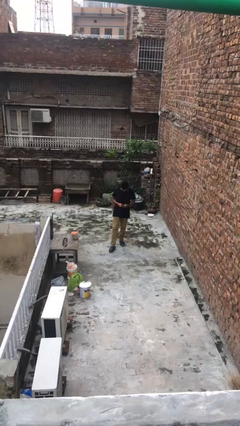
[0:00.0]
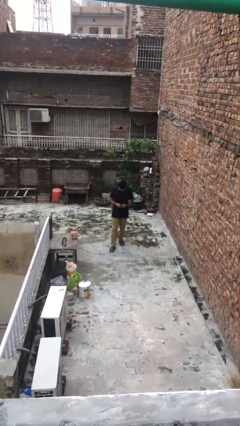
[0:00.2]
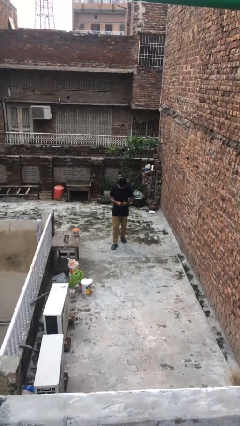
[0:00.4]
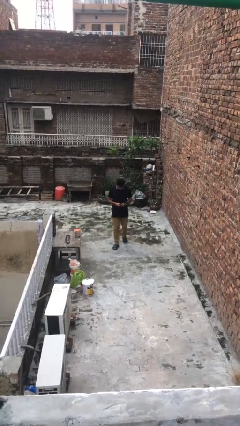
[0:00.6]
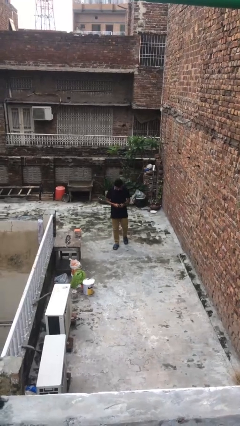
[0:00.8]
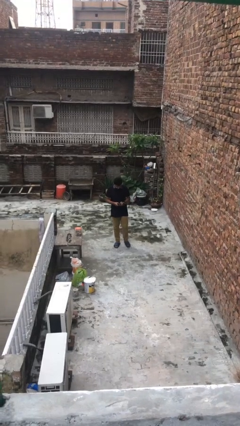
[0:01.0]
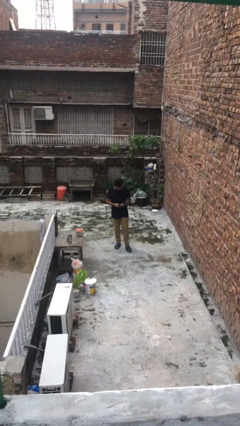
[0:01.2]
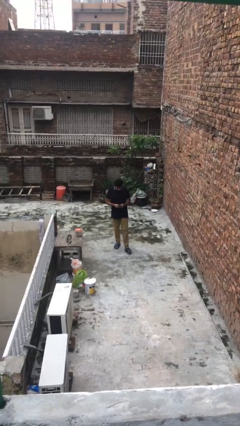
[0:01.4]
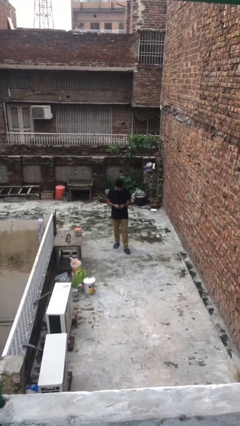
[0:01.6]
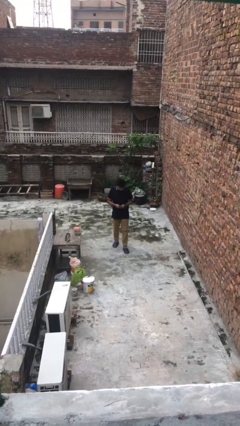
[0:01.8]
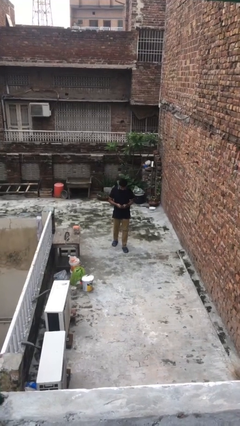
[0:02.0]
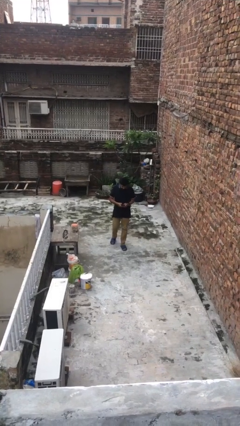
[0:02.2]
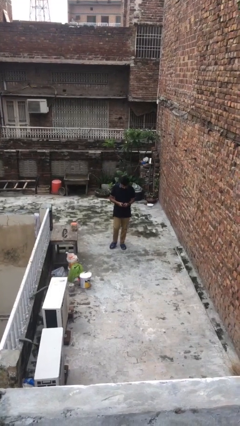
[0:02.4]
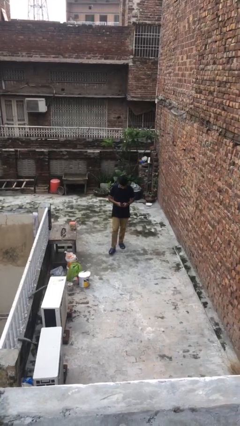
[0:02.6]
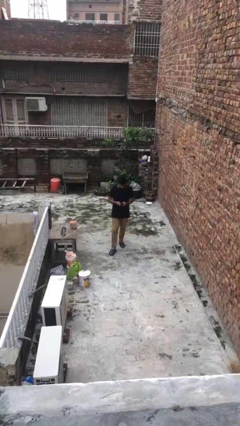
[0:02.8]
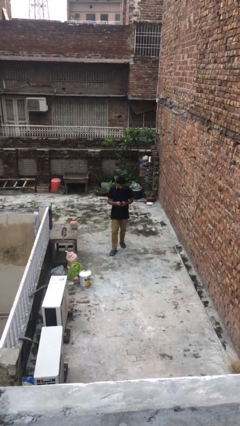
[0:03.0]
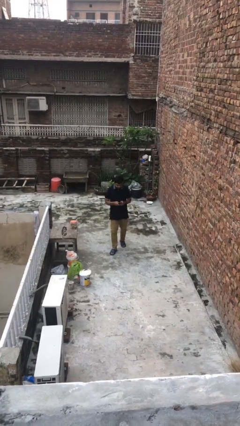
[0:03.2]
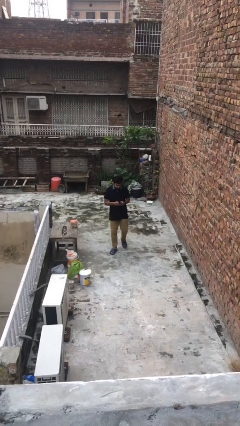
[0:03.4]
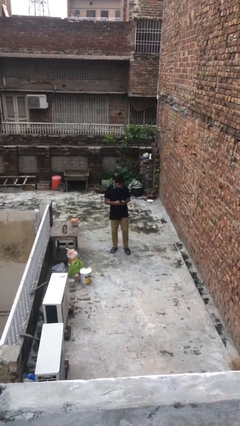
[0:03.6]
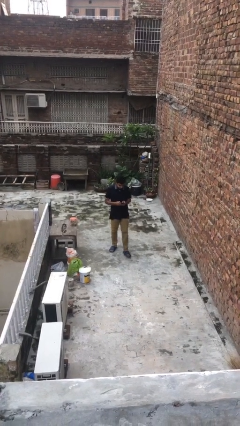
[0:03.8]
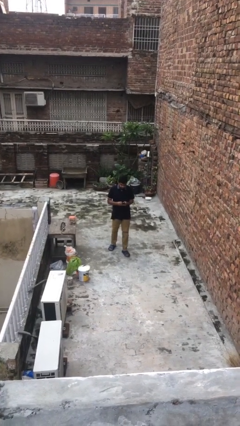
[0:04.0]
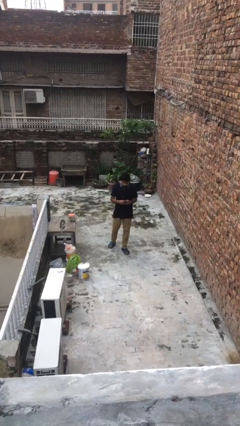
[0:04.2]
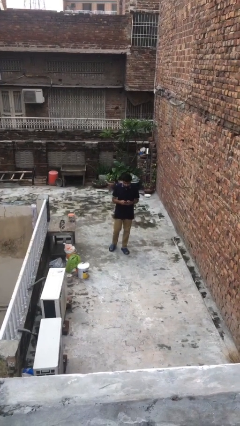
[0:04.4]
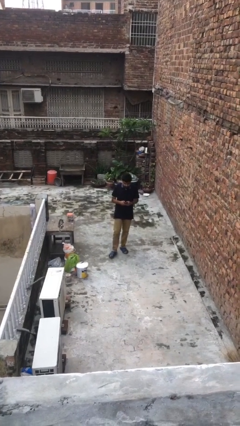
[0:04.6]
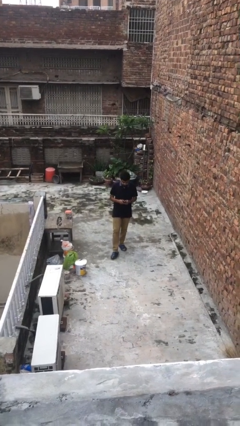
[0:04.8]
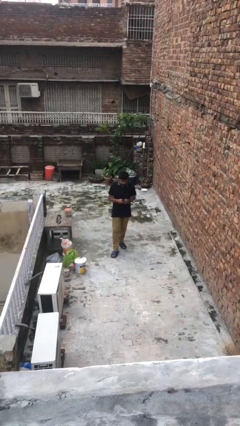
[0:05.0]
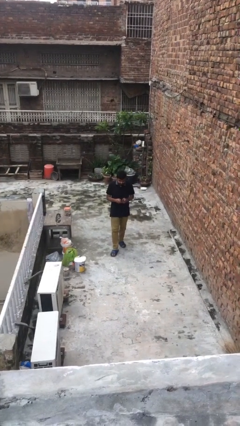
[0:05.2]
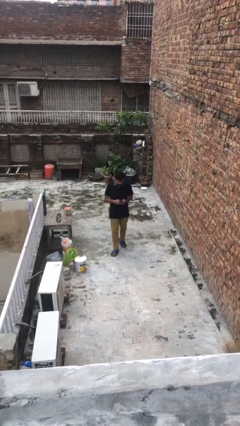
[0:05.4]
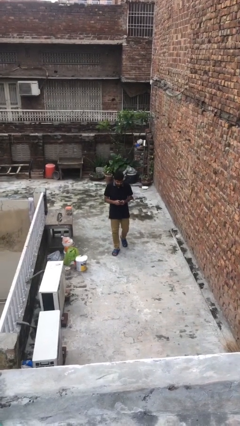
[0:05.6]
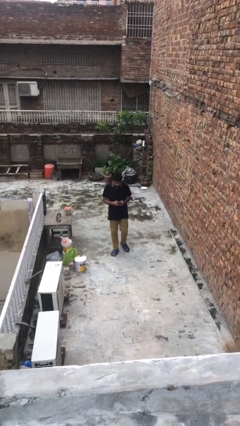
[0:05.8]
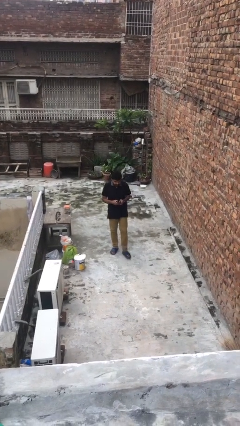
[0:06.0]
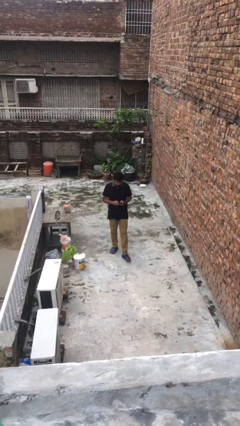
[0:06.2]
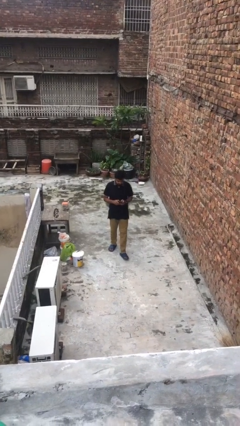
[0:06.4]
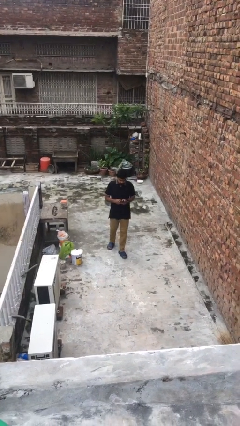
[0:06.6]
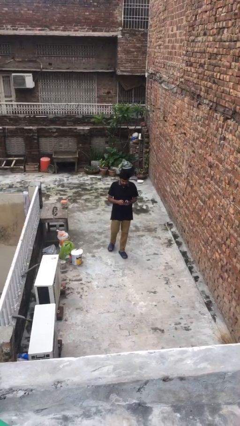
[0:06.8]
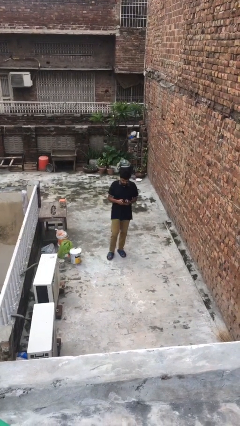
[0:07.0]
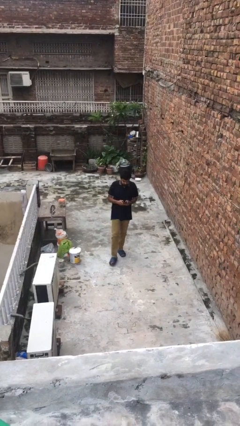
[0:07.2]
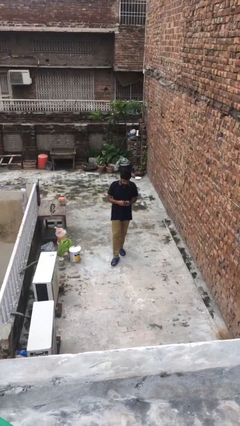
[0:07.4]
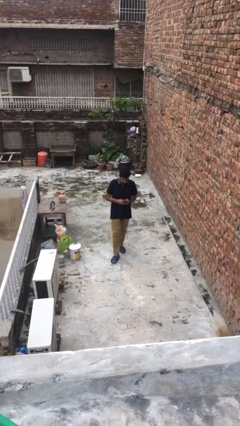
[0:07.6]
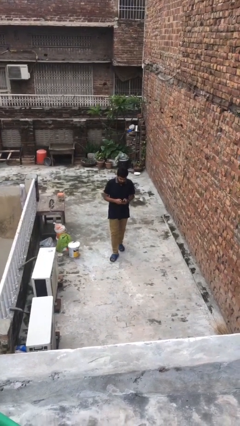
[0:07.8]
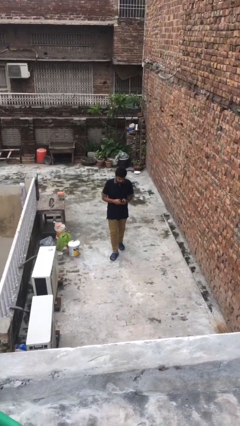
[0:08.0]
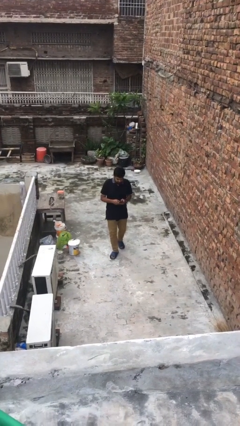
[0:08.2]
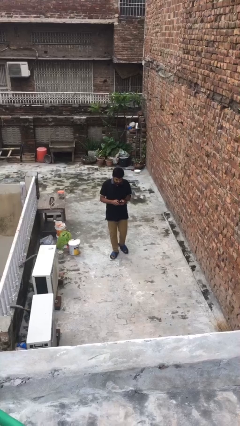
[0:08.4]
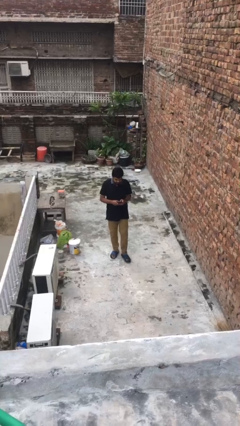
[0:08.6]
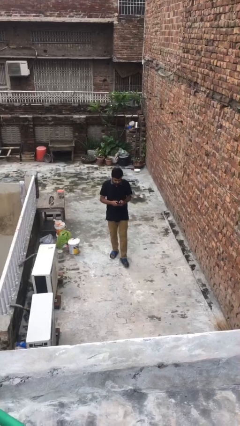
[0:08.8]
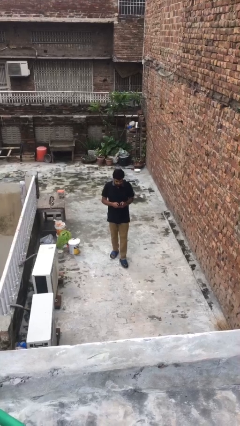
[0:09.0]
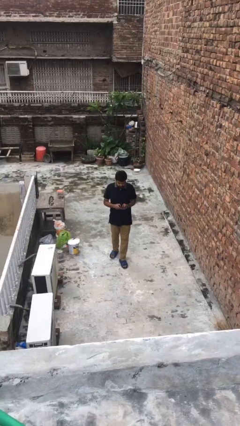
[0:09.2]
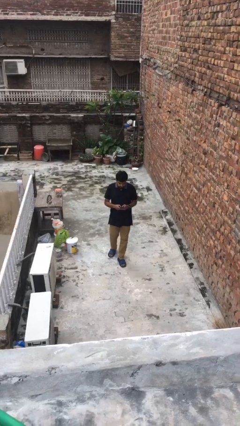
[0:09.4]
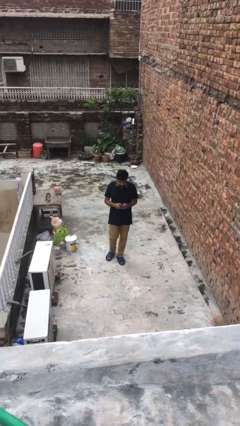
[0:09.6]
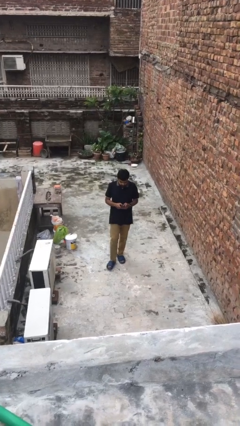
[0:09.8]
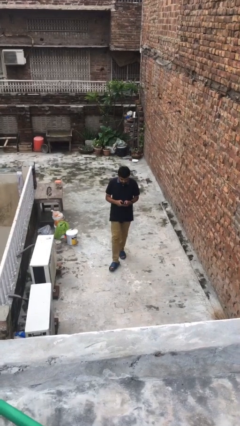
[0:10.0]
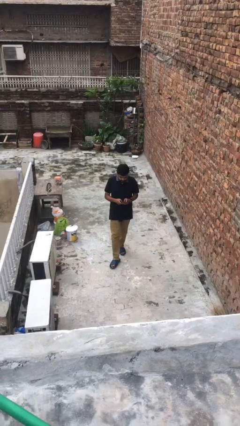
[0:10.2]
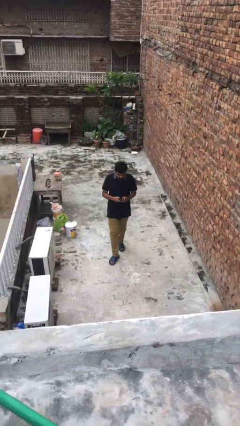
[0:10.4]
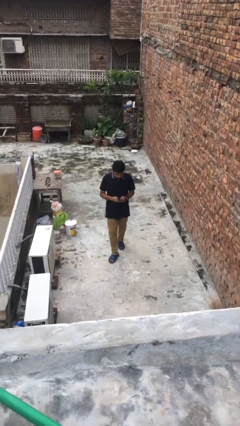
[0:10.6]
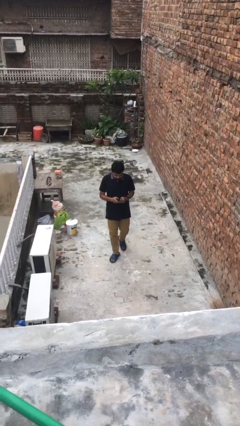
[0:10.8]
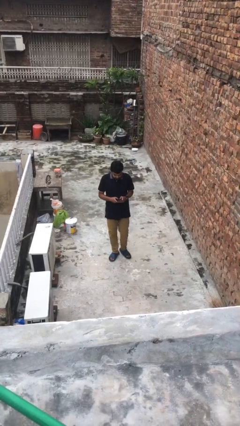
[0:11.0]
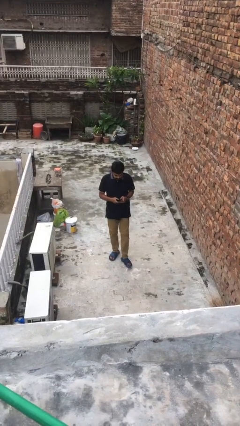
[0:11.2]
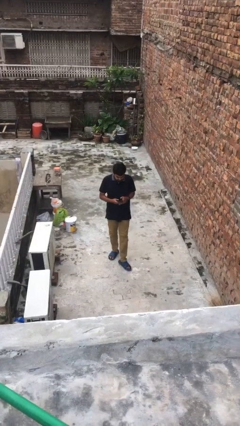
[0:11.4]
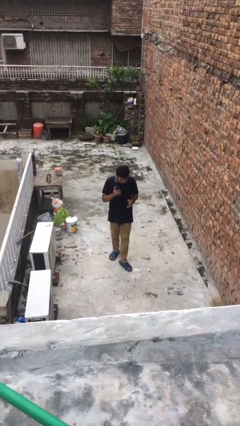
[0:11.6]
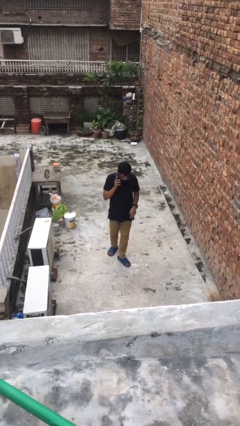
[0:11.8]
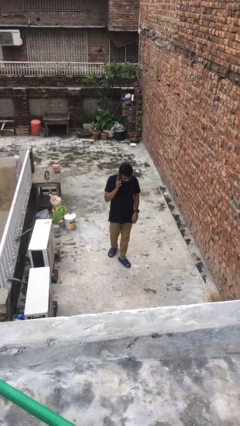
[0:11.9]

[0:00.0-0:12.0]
person texts on phone

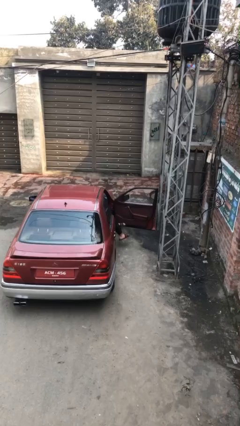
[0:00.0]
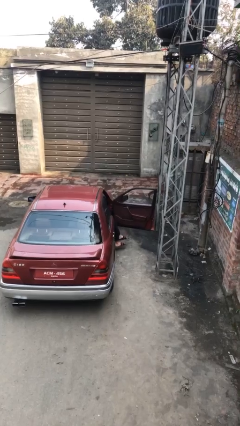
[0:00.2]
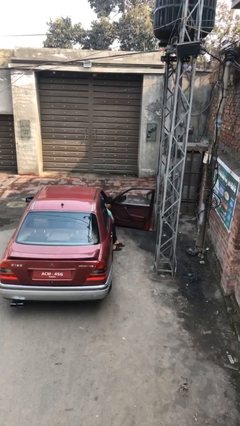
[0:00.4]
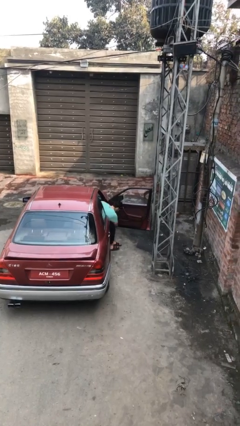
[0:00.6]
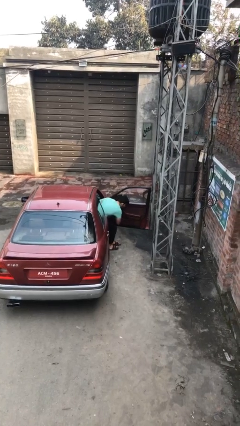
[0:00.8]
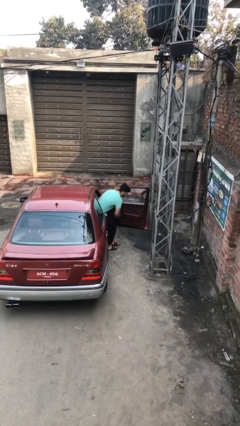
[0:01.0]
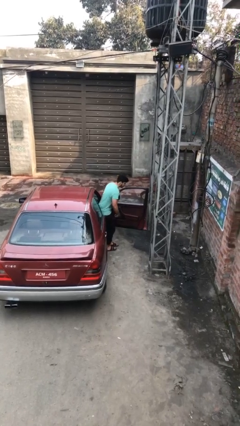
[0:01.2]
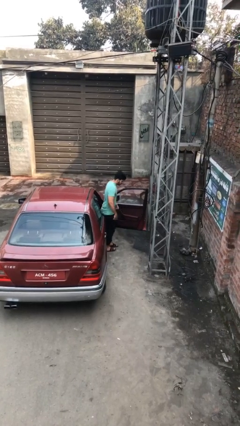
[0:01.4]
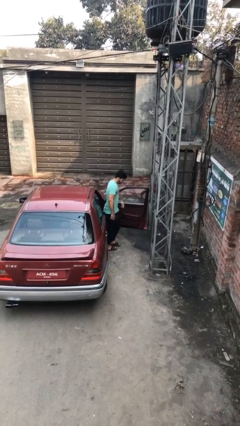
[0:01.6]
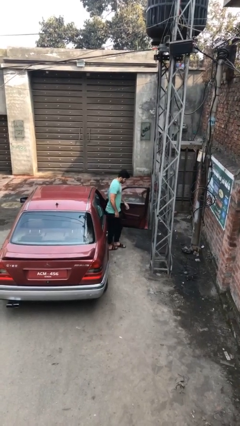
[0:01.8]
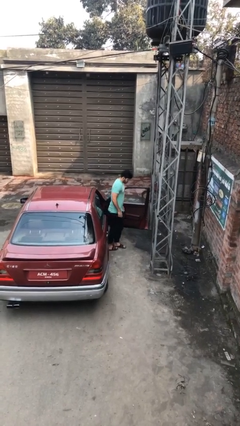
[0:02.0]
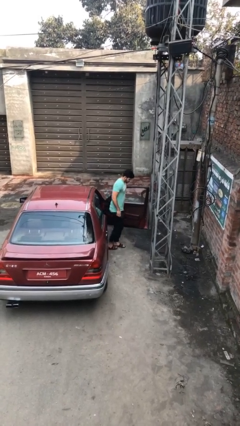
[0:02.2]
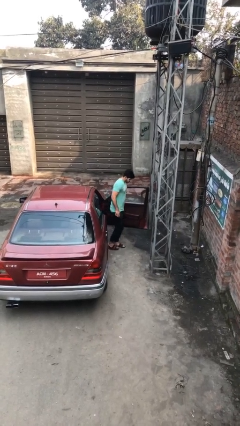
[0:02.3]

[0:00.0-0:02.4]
person exits car

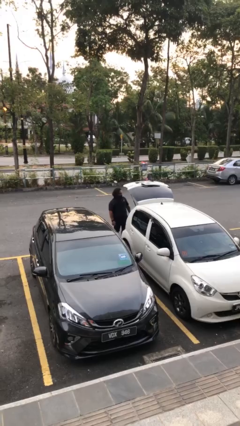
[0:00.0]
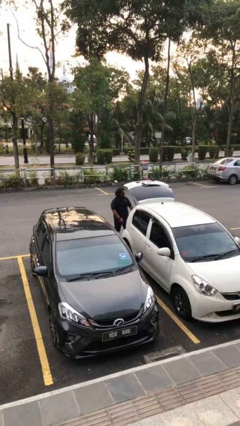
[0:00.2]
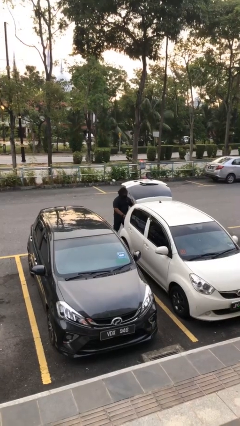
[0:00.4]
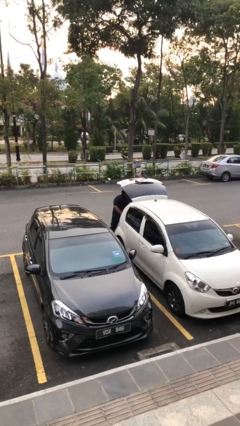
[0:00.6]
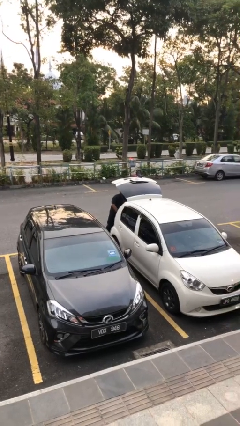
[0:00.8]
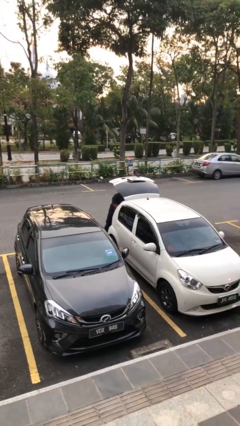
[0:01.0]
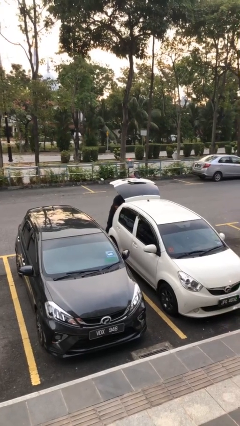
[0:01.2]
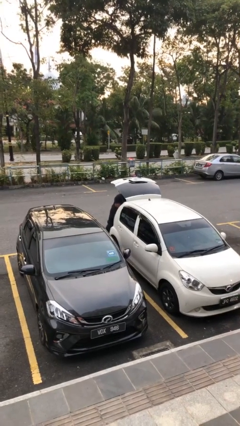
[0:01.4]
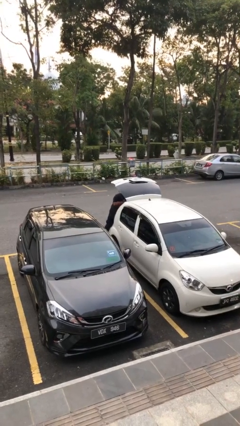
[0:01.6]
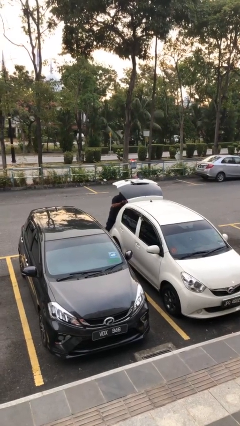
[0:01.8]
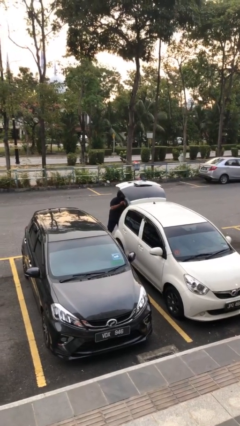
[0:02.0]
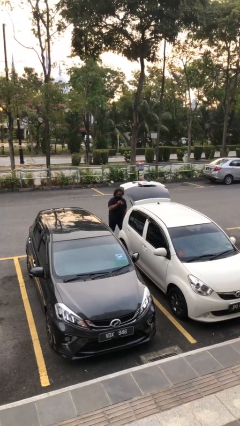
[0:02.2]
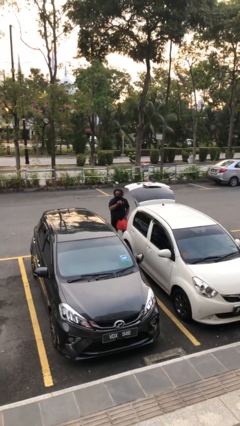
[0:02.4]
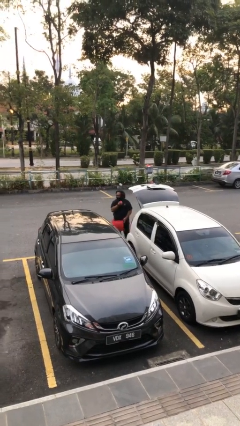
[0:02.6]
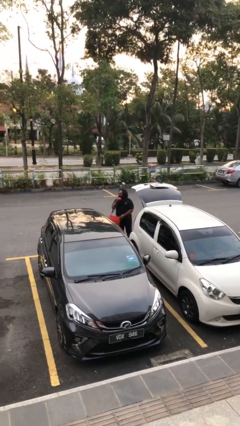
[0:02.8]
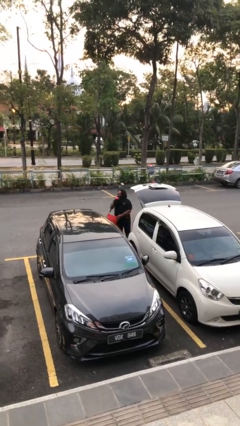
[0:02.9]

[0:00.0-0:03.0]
person unloads car
